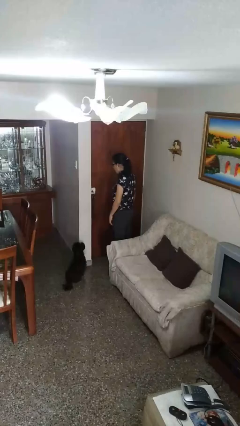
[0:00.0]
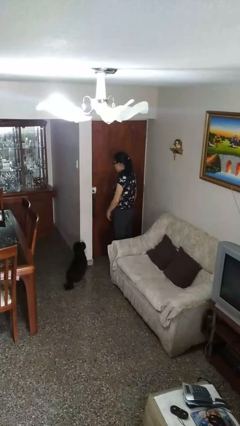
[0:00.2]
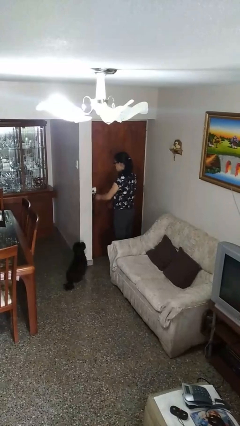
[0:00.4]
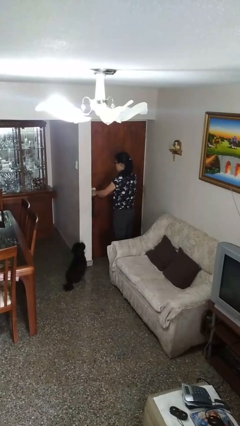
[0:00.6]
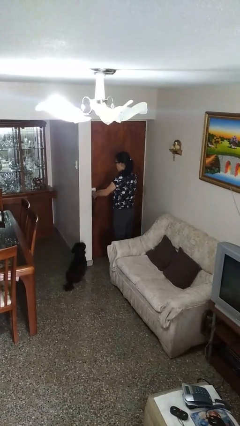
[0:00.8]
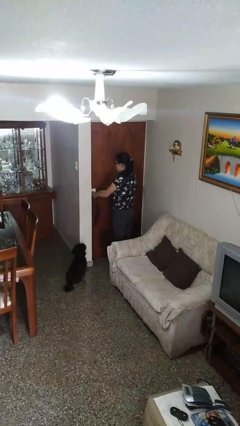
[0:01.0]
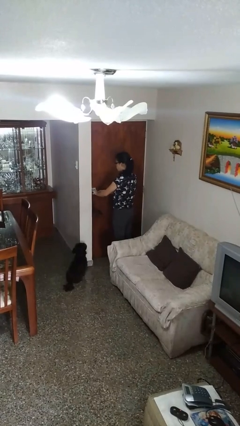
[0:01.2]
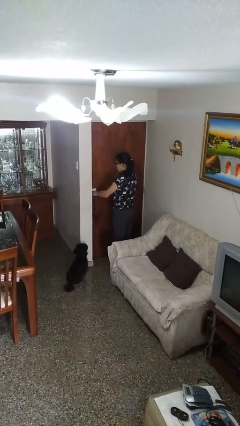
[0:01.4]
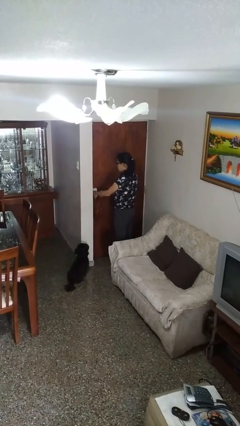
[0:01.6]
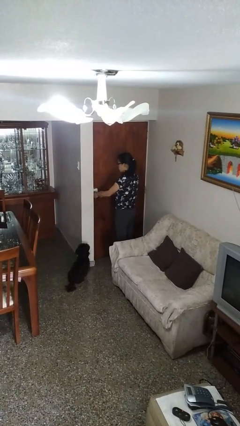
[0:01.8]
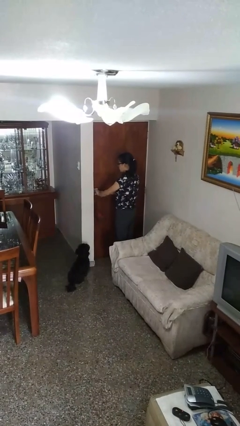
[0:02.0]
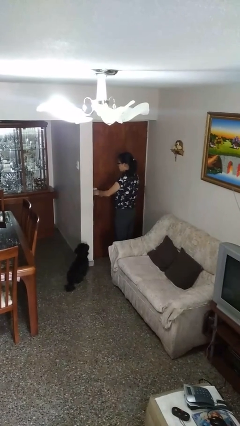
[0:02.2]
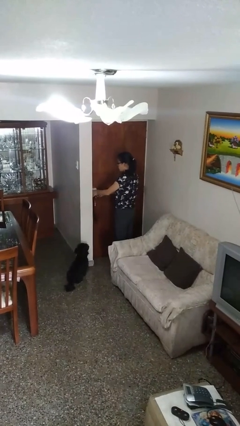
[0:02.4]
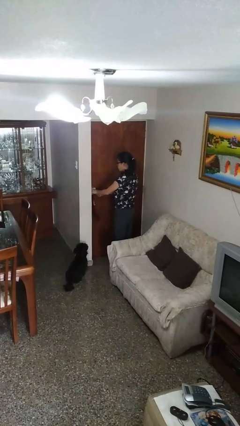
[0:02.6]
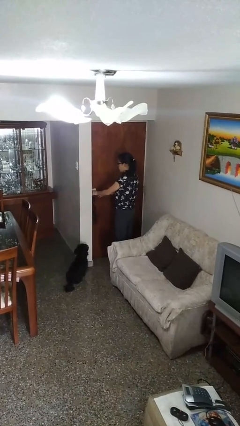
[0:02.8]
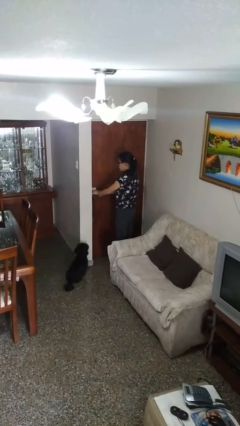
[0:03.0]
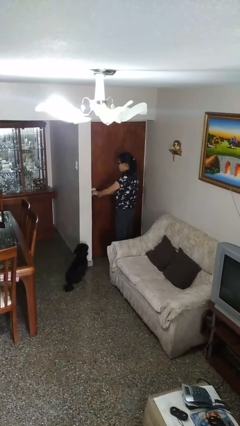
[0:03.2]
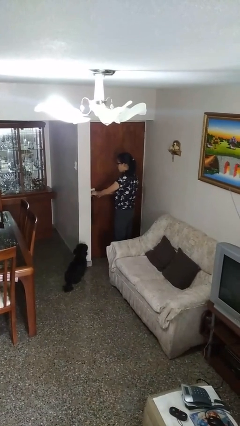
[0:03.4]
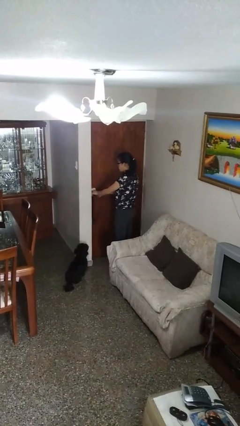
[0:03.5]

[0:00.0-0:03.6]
person unlocks door with keys

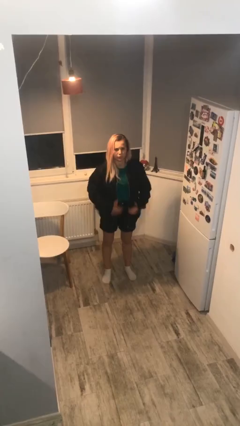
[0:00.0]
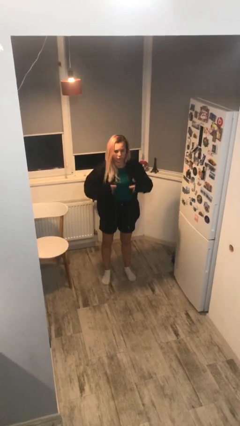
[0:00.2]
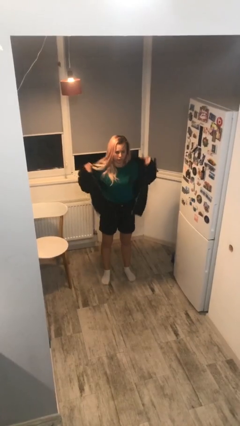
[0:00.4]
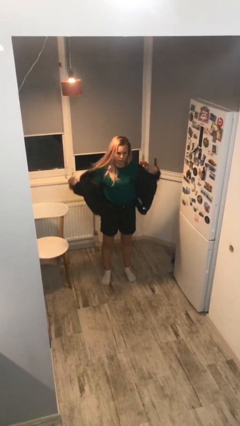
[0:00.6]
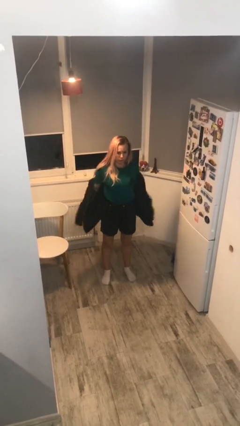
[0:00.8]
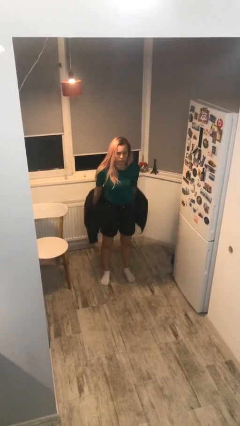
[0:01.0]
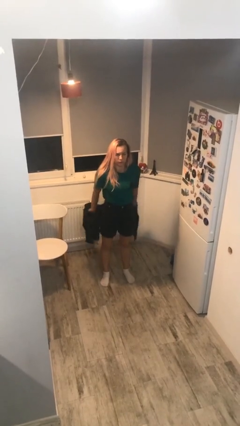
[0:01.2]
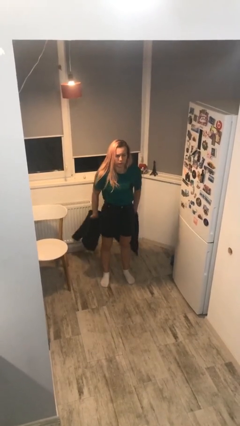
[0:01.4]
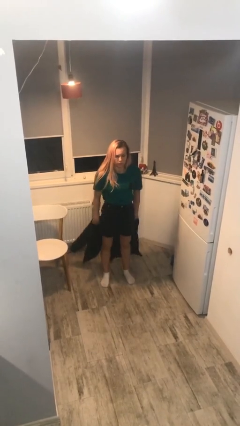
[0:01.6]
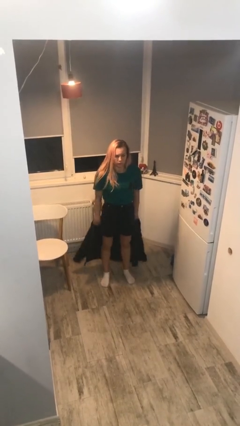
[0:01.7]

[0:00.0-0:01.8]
person takes off jacket

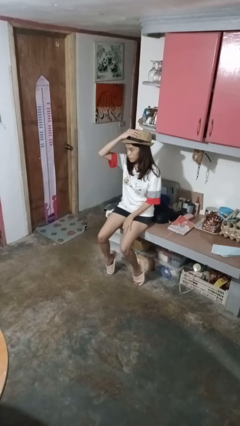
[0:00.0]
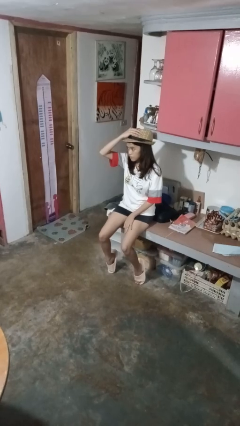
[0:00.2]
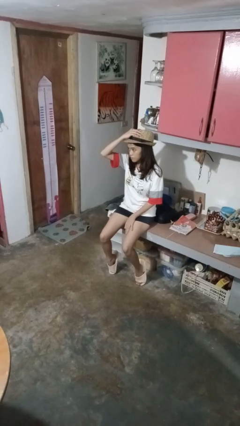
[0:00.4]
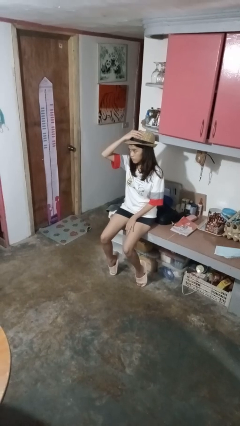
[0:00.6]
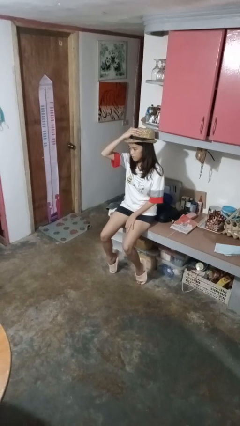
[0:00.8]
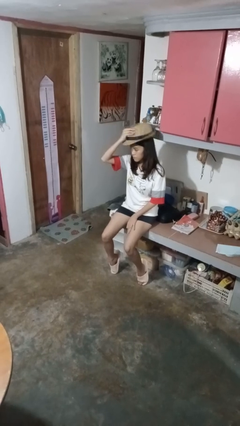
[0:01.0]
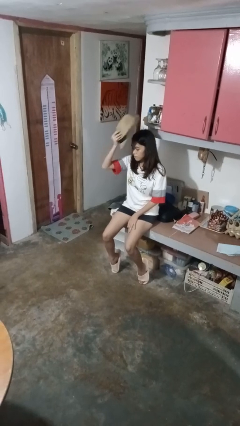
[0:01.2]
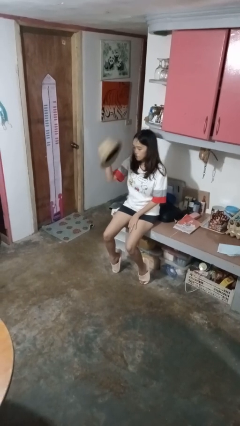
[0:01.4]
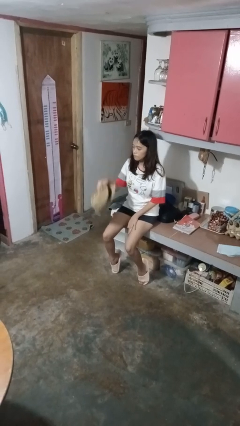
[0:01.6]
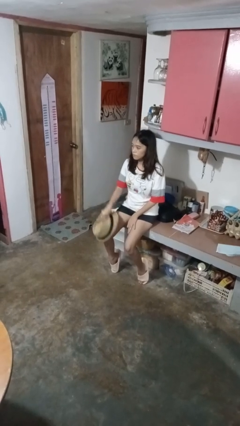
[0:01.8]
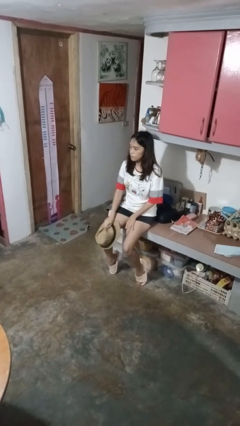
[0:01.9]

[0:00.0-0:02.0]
person takes off hat

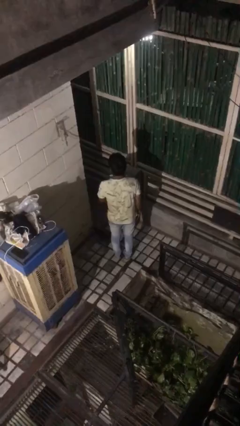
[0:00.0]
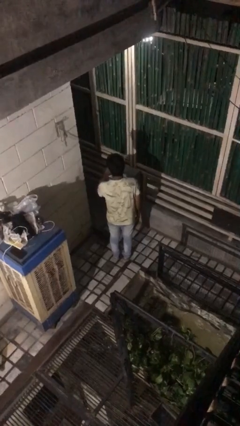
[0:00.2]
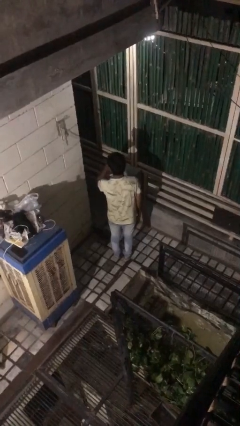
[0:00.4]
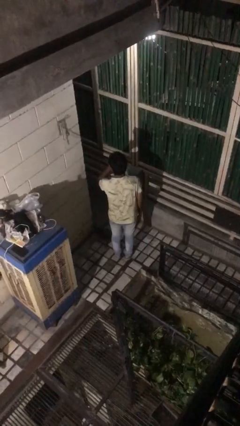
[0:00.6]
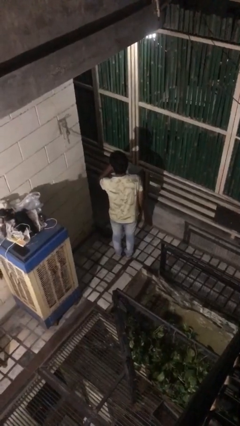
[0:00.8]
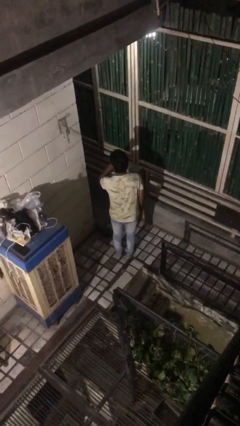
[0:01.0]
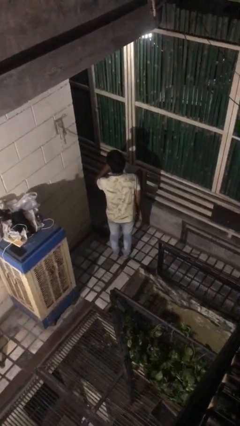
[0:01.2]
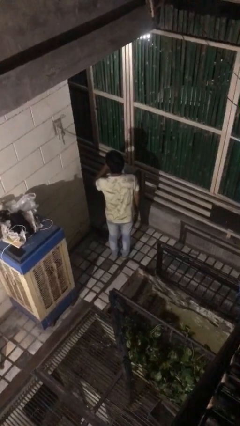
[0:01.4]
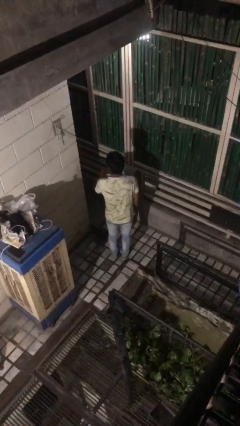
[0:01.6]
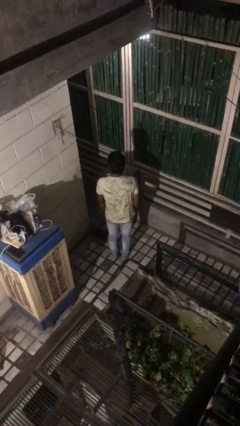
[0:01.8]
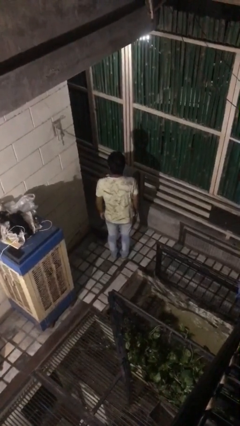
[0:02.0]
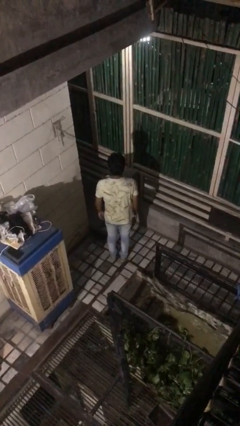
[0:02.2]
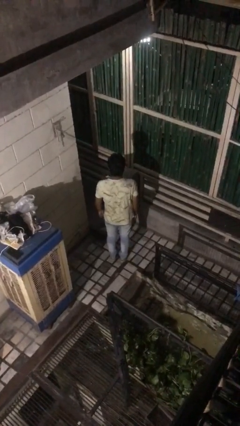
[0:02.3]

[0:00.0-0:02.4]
person gestures be quiet

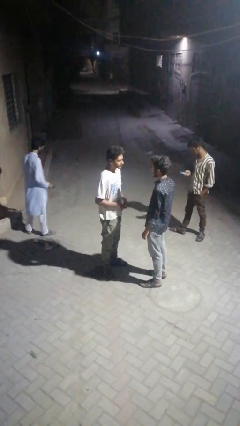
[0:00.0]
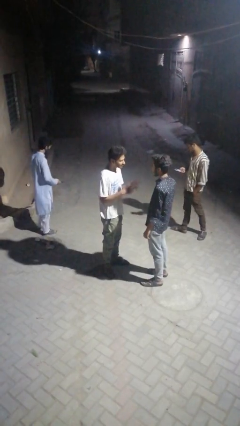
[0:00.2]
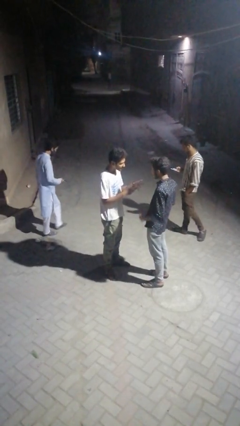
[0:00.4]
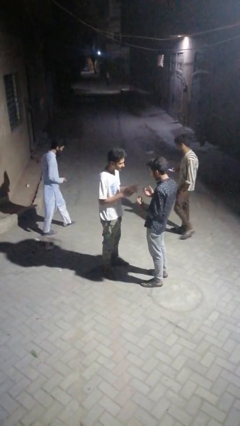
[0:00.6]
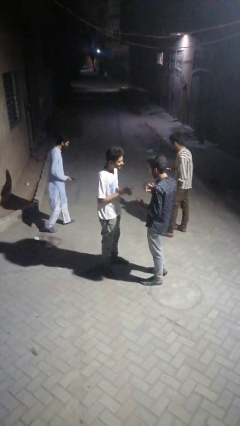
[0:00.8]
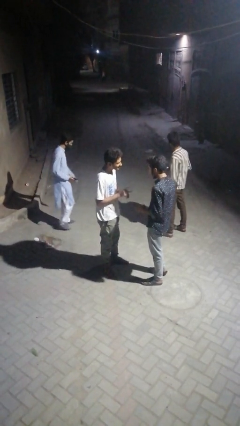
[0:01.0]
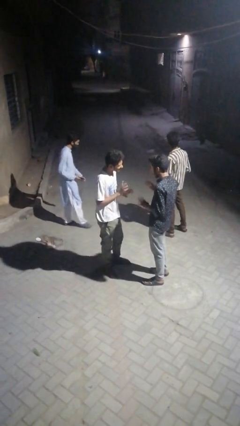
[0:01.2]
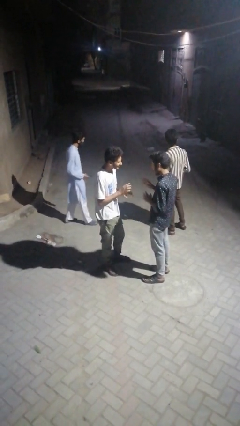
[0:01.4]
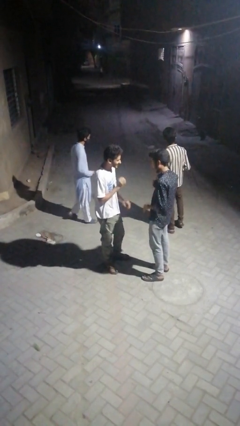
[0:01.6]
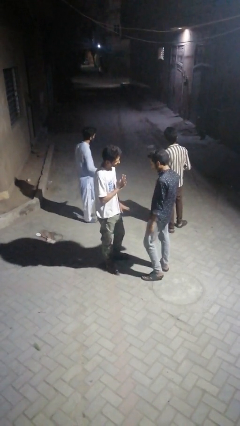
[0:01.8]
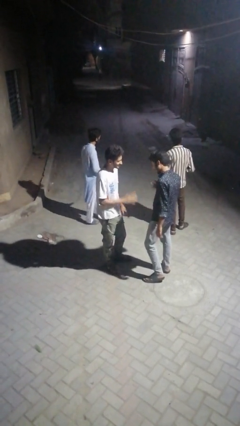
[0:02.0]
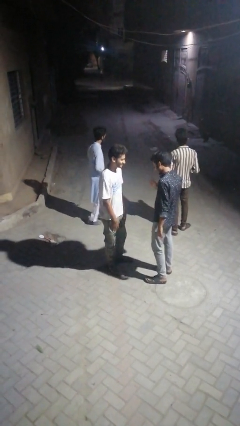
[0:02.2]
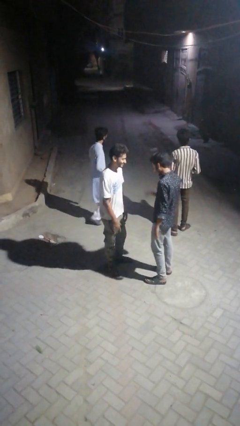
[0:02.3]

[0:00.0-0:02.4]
person talks to person

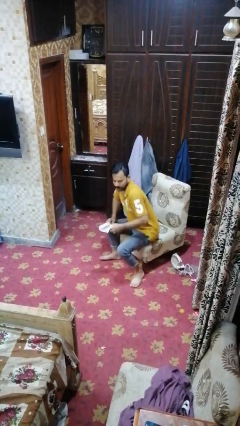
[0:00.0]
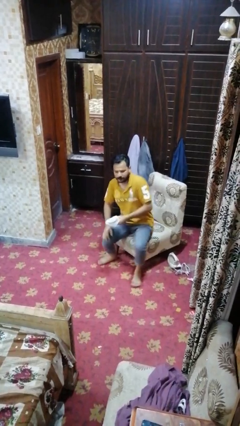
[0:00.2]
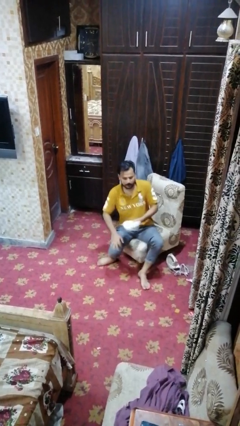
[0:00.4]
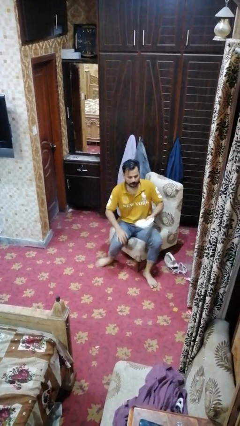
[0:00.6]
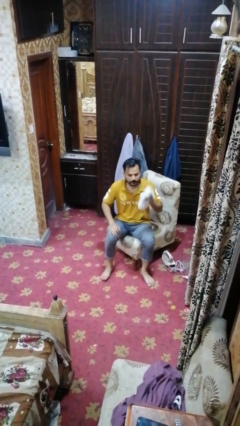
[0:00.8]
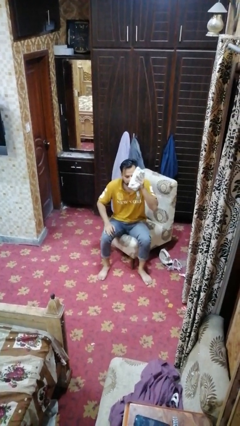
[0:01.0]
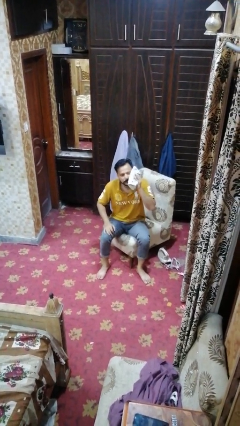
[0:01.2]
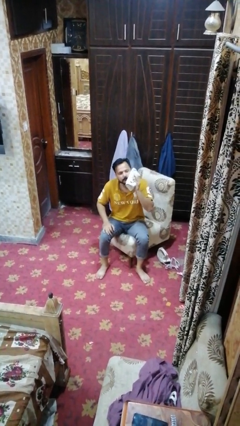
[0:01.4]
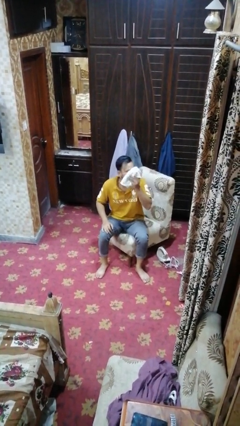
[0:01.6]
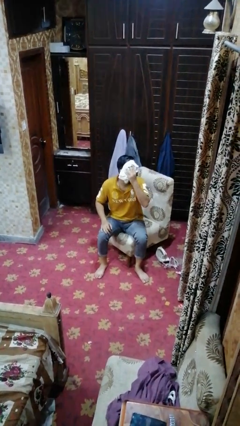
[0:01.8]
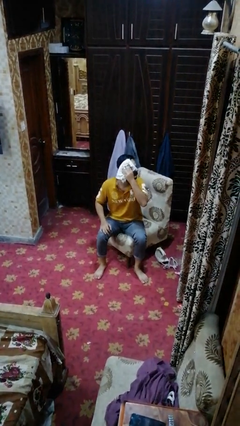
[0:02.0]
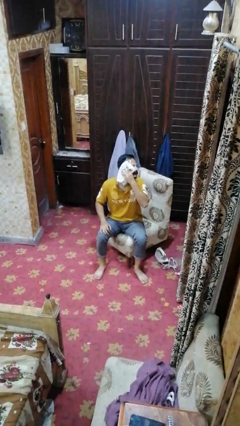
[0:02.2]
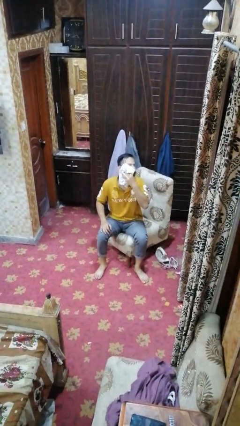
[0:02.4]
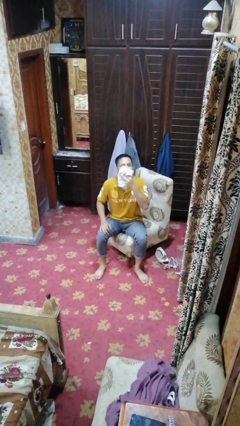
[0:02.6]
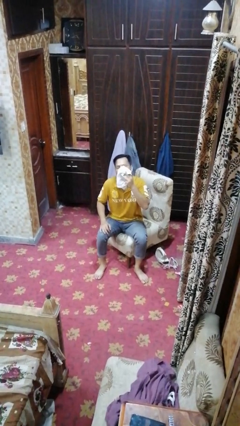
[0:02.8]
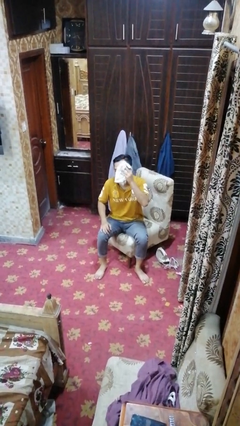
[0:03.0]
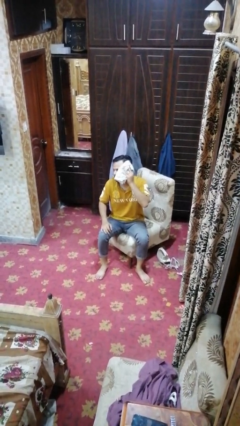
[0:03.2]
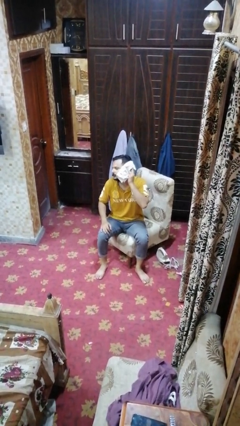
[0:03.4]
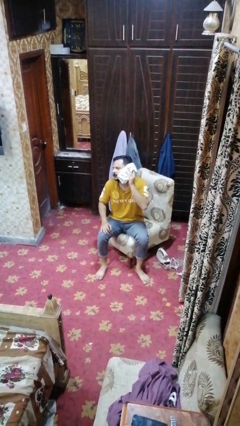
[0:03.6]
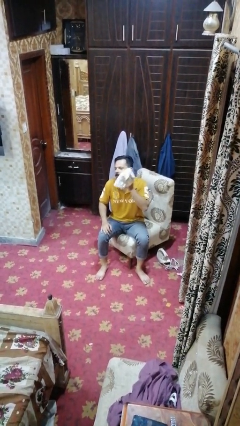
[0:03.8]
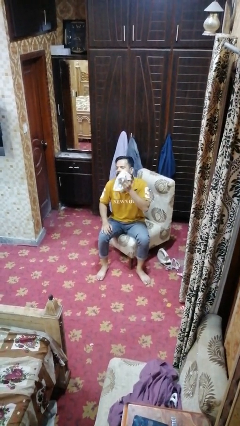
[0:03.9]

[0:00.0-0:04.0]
person wipes mouth with napkin

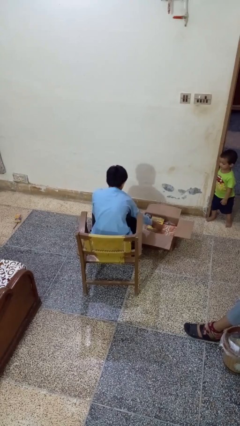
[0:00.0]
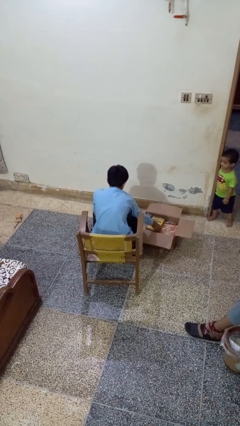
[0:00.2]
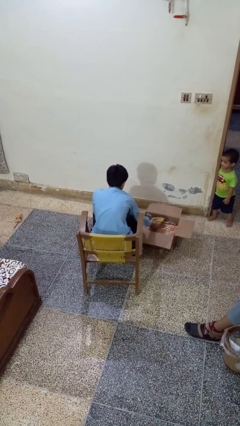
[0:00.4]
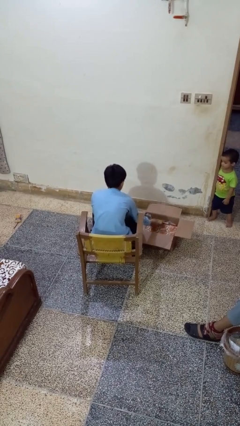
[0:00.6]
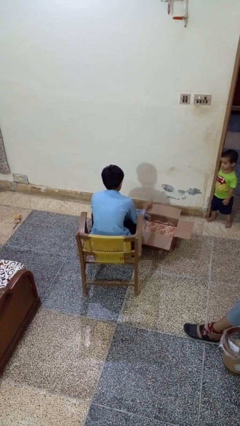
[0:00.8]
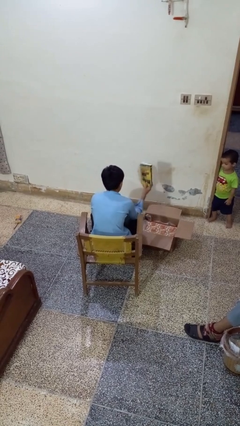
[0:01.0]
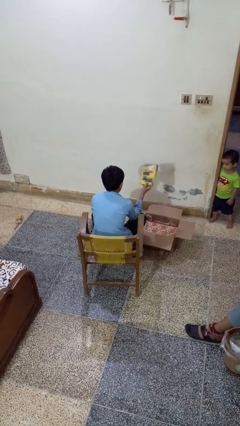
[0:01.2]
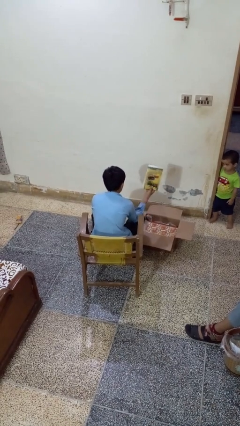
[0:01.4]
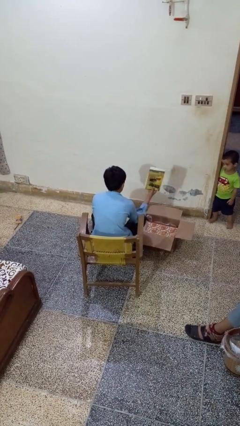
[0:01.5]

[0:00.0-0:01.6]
person takes object from box
